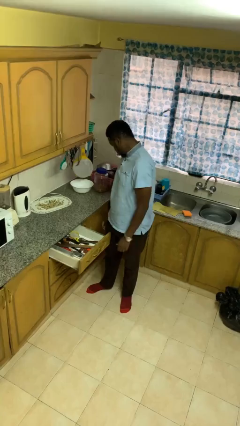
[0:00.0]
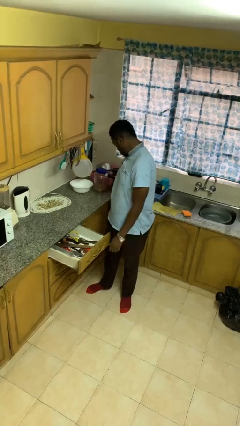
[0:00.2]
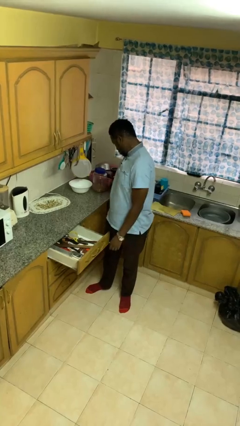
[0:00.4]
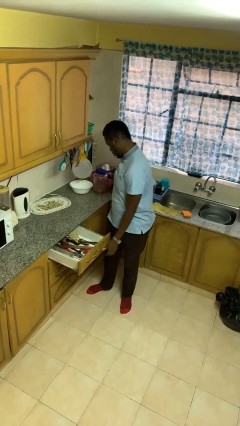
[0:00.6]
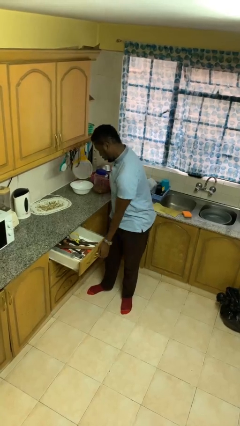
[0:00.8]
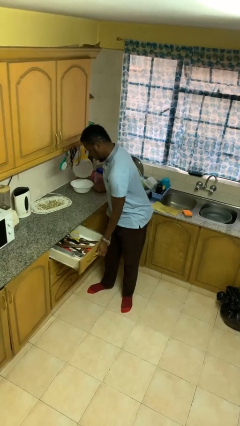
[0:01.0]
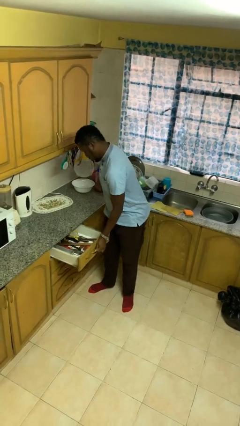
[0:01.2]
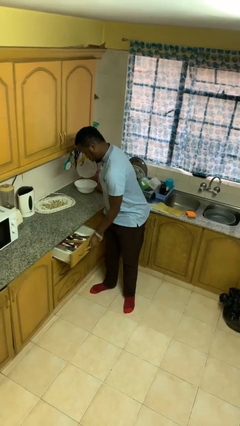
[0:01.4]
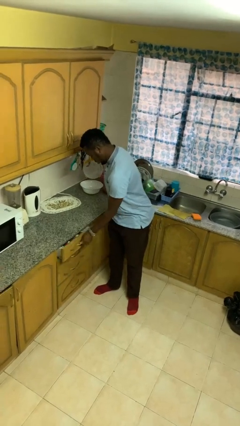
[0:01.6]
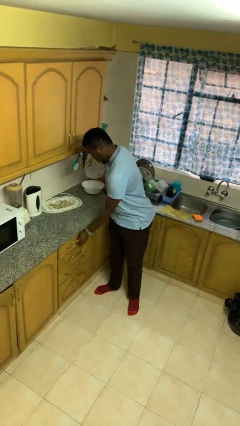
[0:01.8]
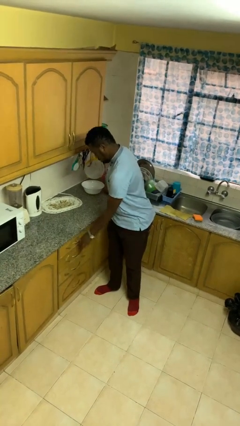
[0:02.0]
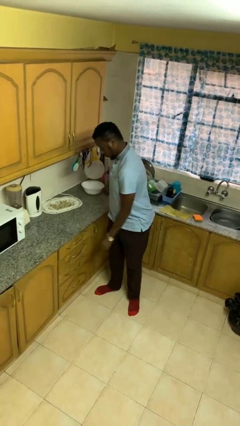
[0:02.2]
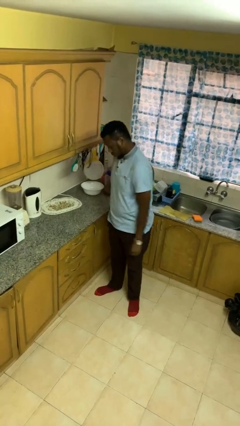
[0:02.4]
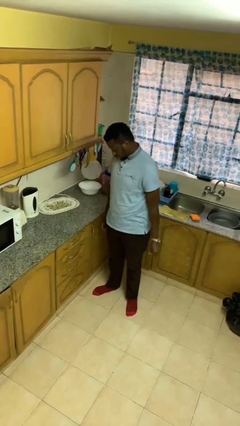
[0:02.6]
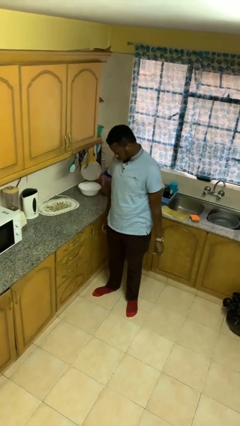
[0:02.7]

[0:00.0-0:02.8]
person closes kitchen drawer

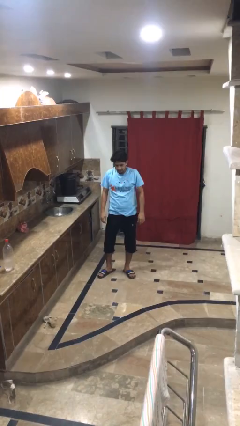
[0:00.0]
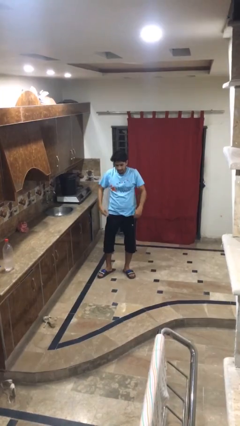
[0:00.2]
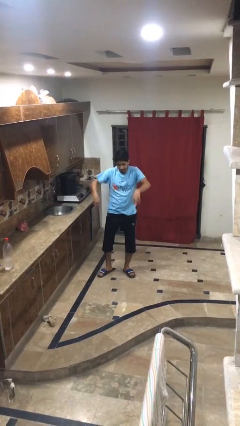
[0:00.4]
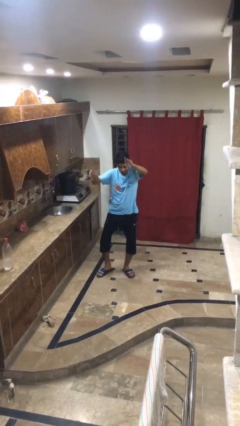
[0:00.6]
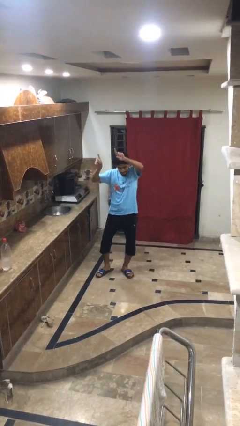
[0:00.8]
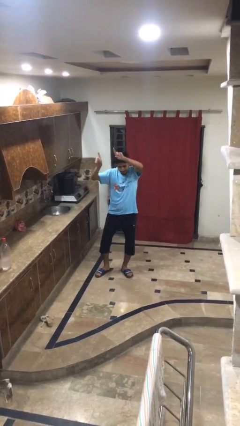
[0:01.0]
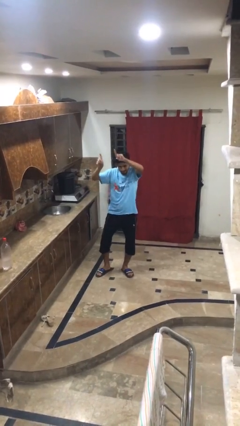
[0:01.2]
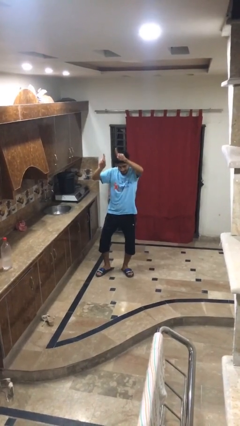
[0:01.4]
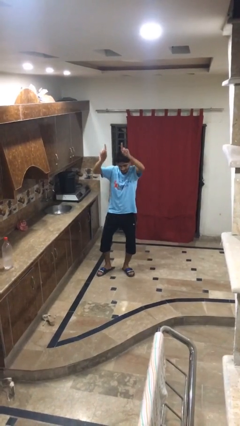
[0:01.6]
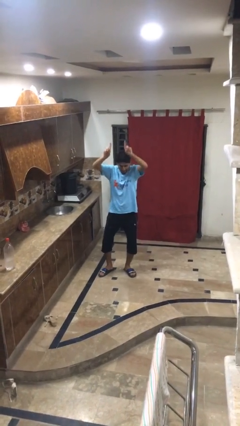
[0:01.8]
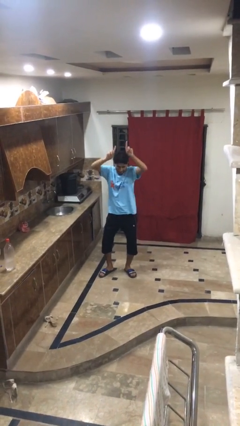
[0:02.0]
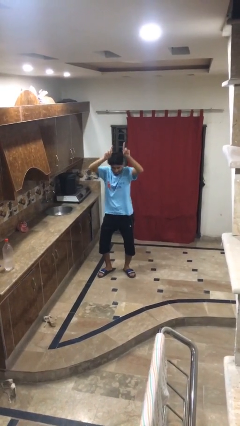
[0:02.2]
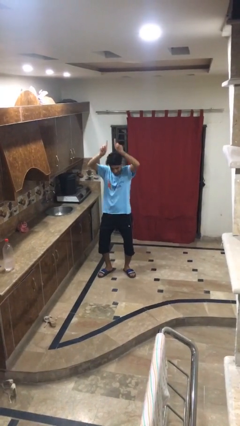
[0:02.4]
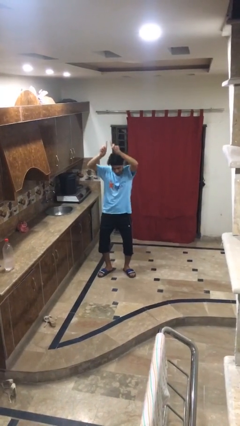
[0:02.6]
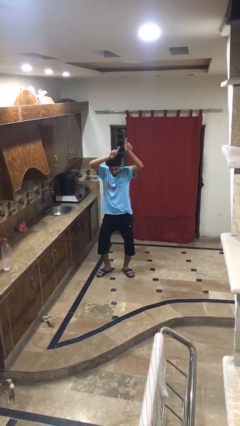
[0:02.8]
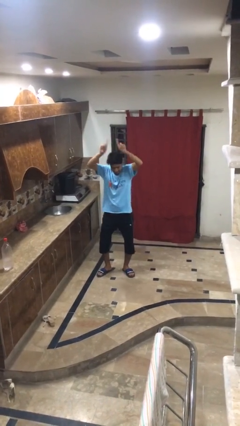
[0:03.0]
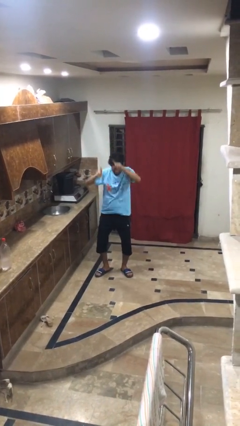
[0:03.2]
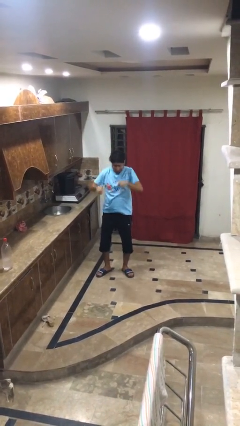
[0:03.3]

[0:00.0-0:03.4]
person dances in place

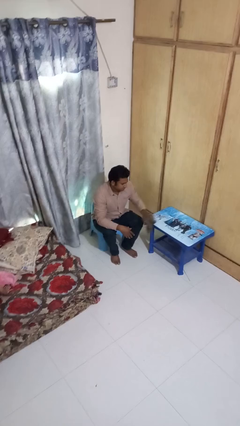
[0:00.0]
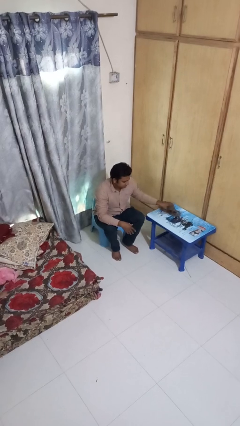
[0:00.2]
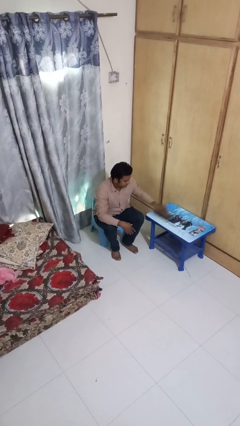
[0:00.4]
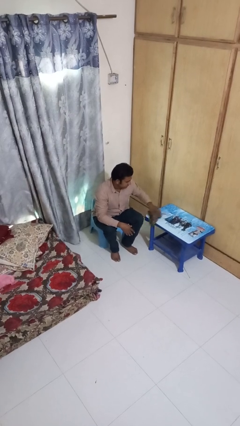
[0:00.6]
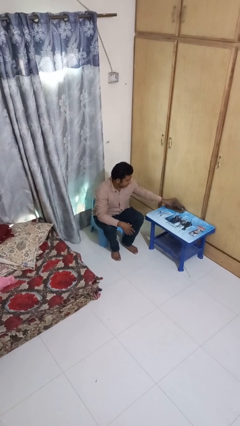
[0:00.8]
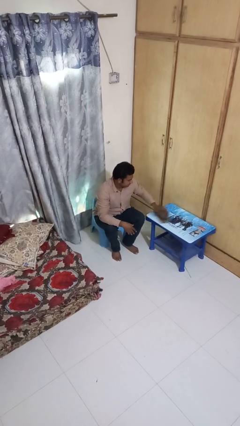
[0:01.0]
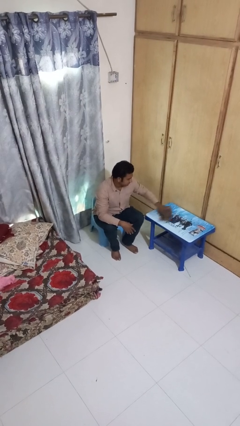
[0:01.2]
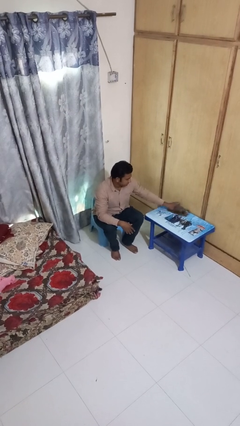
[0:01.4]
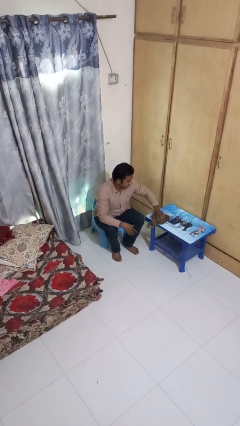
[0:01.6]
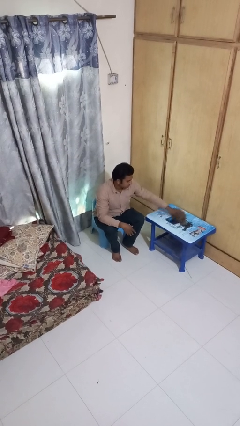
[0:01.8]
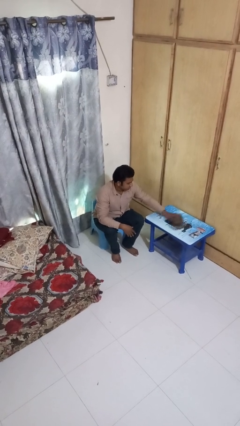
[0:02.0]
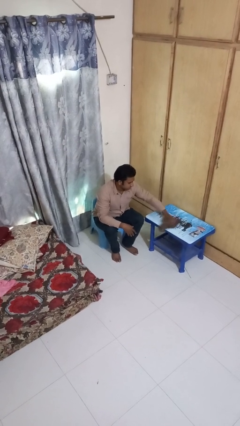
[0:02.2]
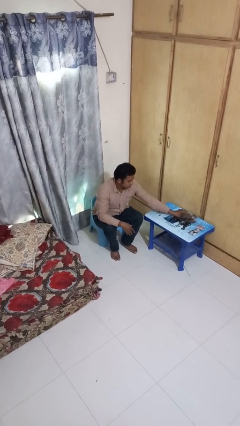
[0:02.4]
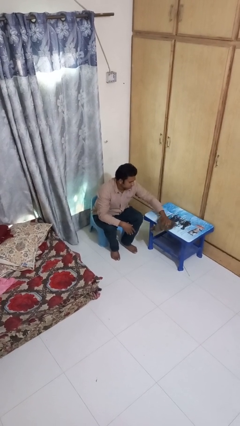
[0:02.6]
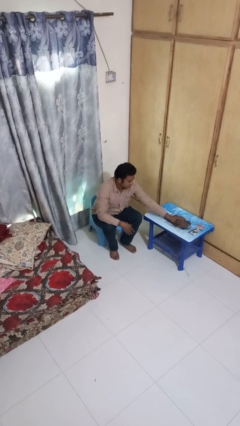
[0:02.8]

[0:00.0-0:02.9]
person cleans table with rag

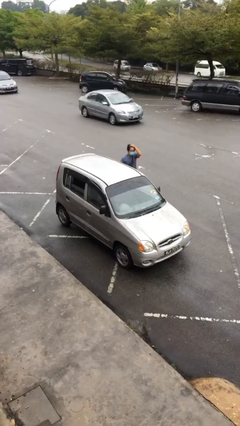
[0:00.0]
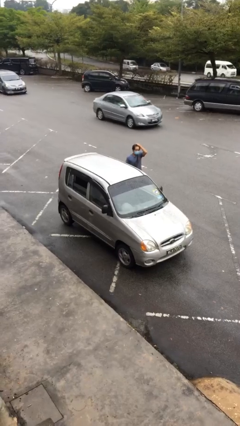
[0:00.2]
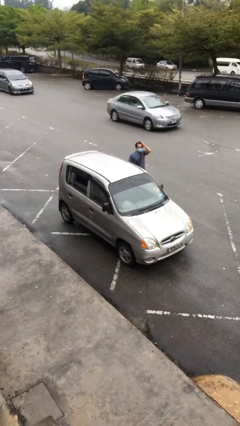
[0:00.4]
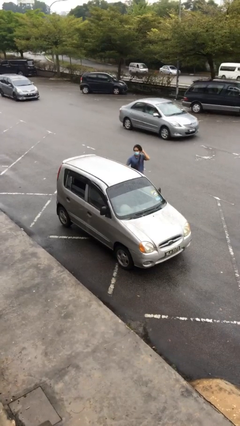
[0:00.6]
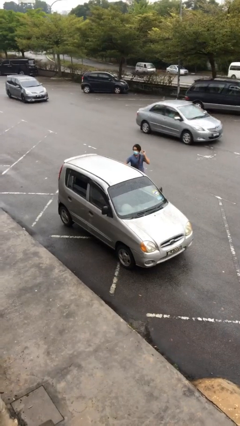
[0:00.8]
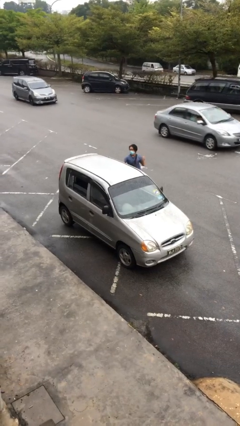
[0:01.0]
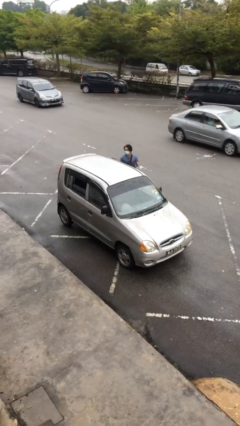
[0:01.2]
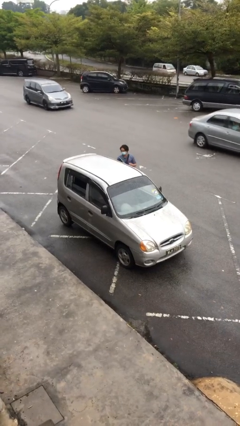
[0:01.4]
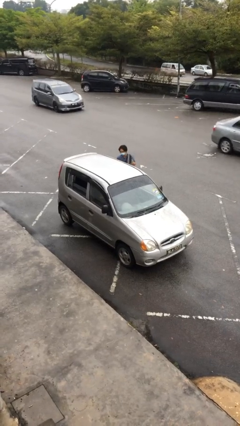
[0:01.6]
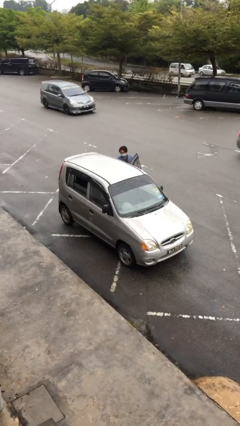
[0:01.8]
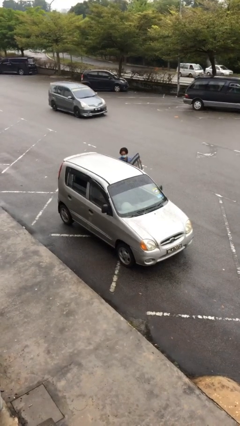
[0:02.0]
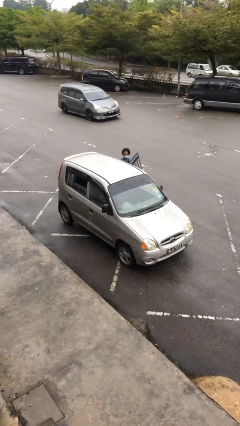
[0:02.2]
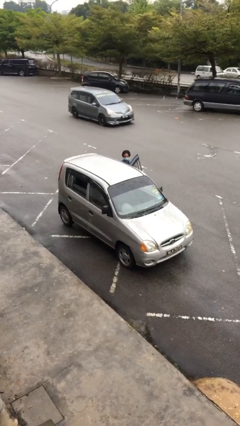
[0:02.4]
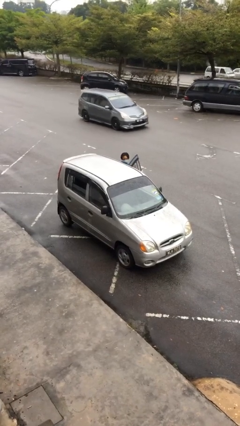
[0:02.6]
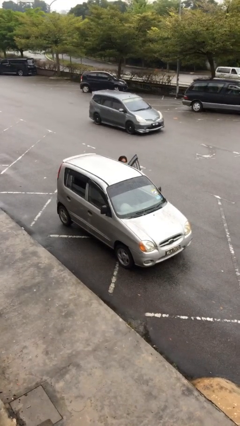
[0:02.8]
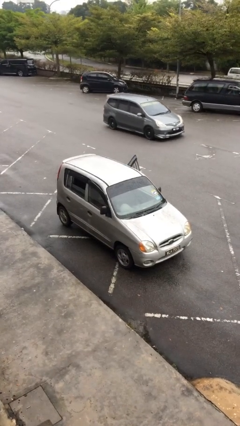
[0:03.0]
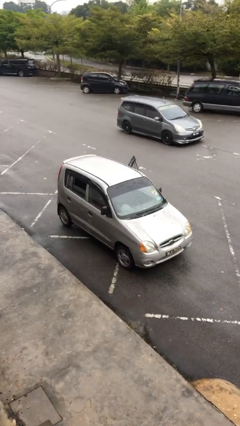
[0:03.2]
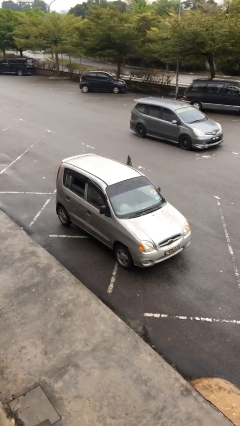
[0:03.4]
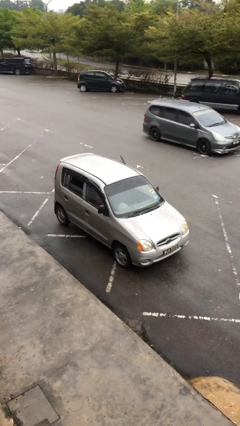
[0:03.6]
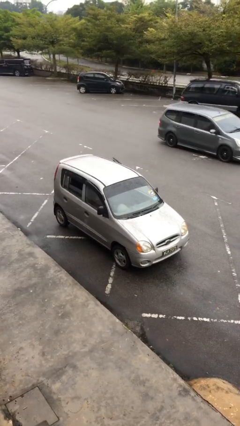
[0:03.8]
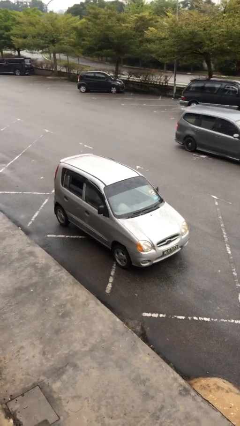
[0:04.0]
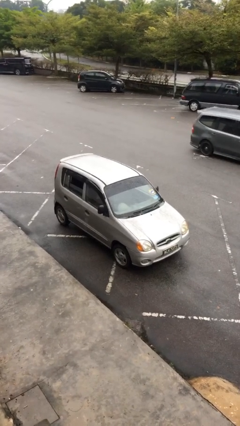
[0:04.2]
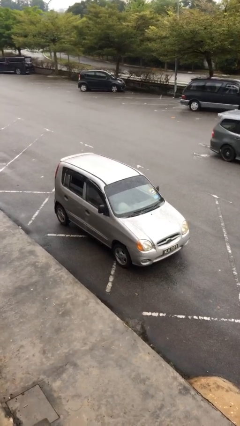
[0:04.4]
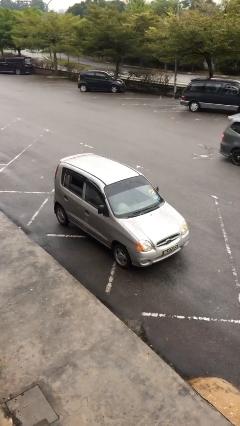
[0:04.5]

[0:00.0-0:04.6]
car picks up person

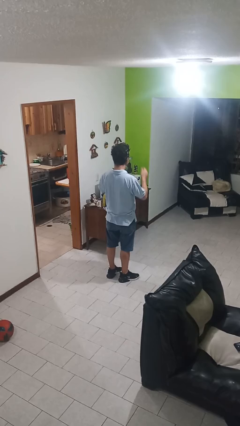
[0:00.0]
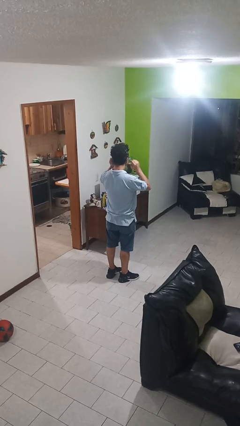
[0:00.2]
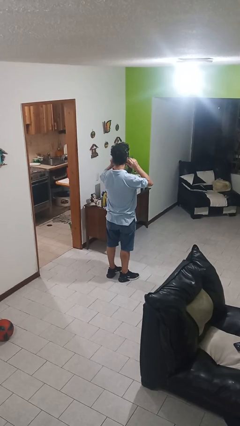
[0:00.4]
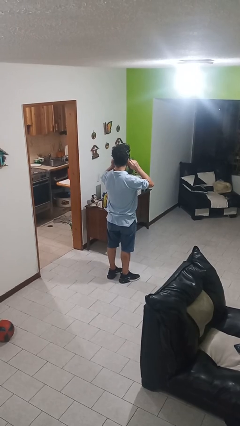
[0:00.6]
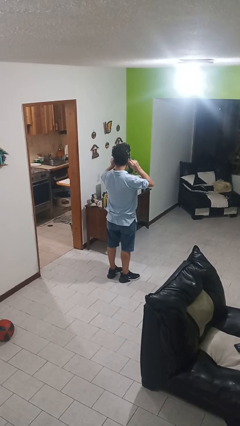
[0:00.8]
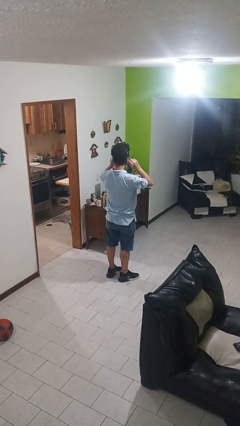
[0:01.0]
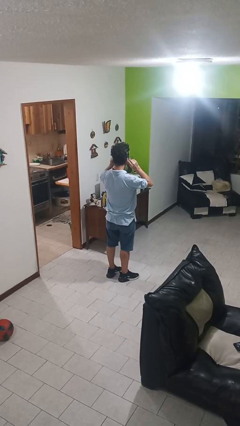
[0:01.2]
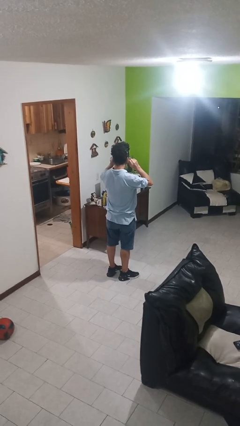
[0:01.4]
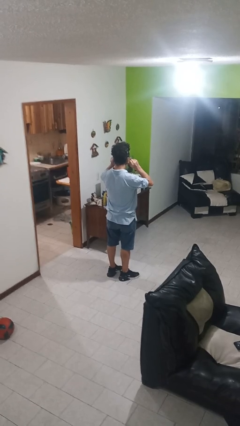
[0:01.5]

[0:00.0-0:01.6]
person touches earlobe

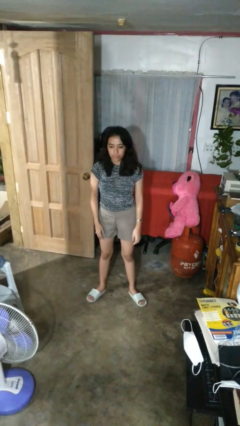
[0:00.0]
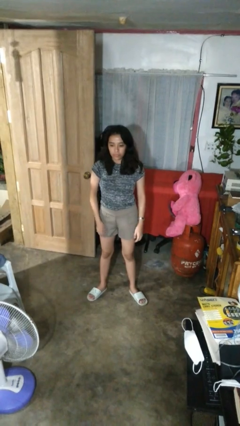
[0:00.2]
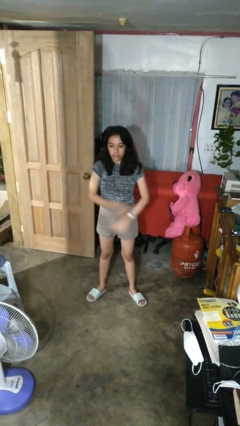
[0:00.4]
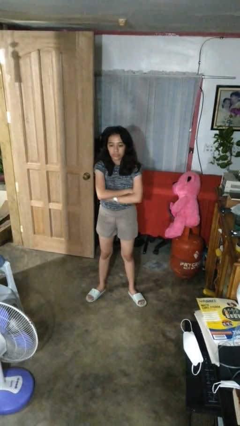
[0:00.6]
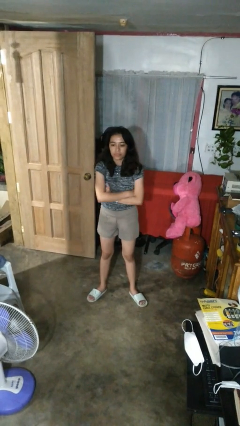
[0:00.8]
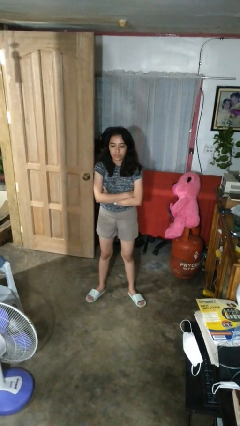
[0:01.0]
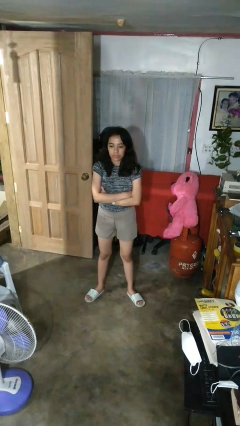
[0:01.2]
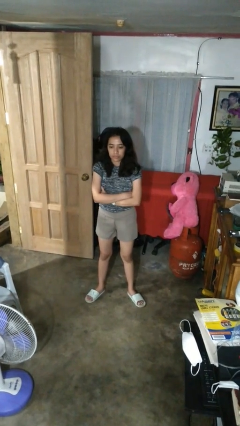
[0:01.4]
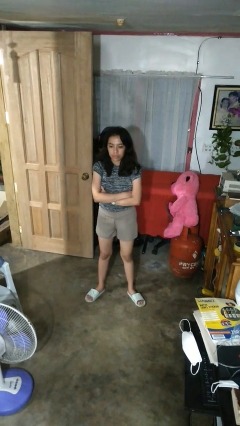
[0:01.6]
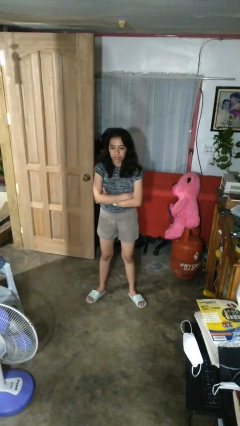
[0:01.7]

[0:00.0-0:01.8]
person crosses arms

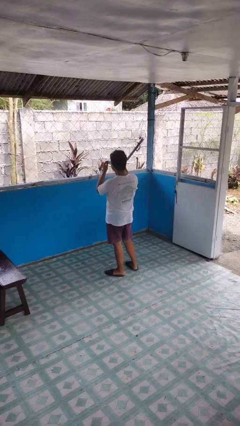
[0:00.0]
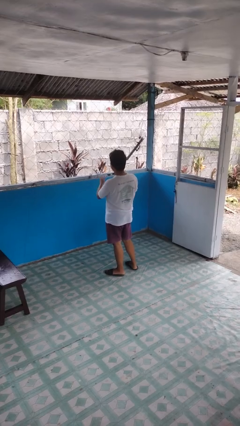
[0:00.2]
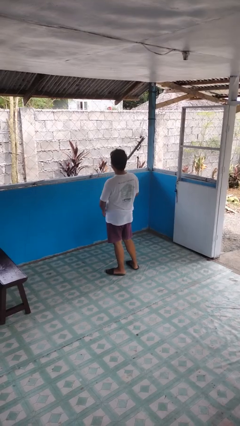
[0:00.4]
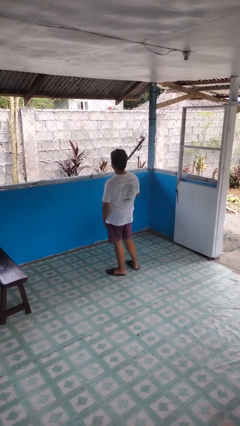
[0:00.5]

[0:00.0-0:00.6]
person takes off sunglasses
